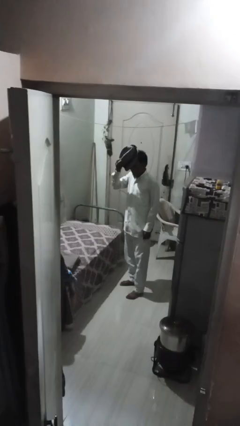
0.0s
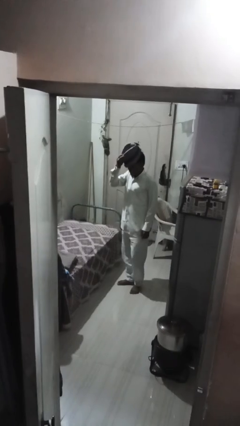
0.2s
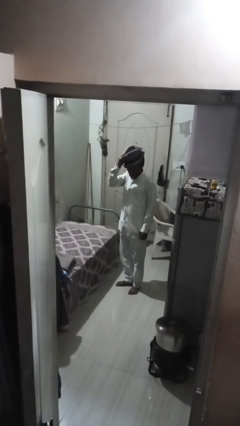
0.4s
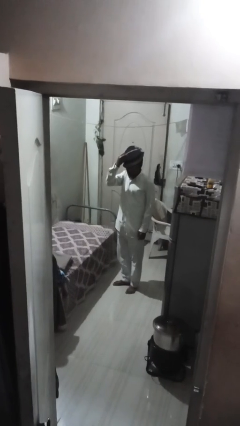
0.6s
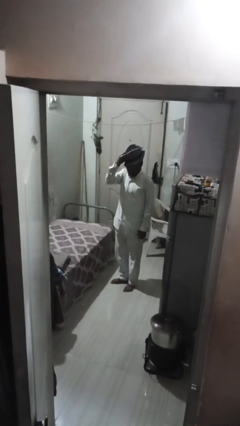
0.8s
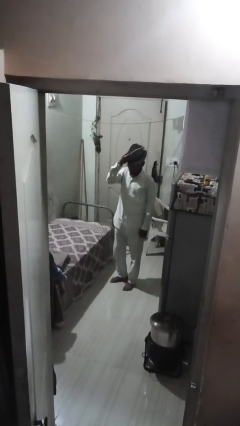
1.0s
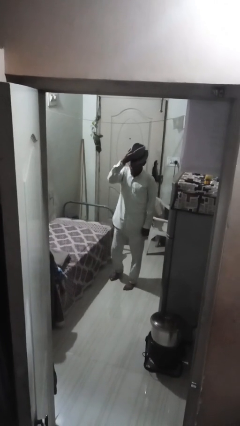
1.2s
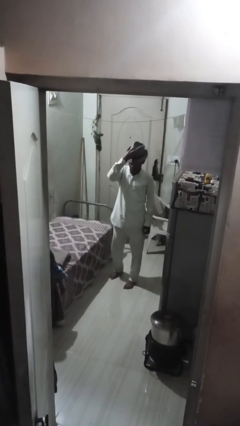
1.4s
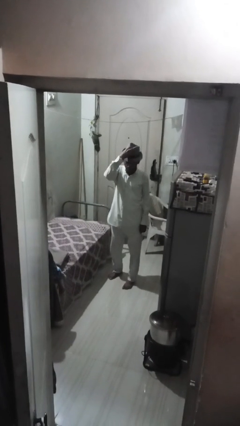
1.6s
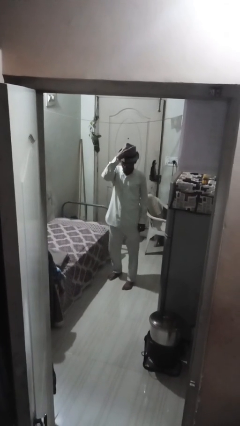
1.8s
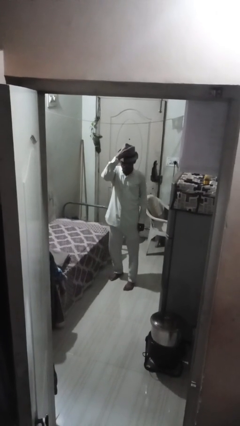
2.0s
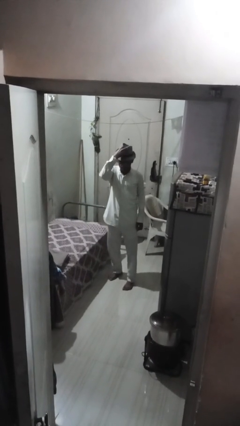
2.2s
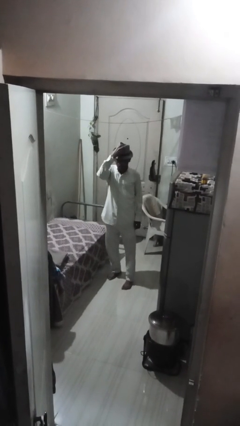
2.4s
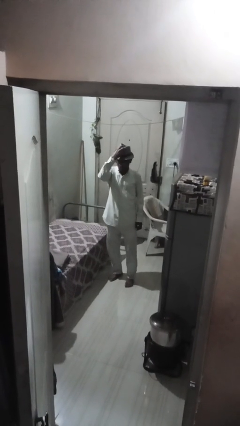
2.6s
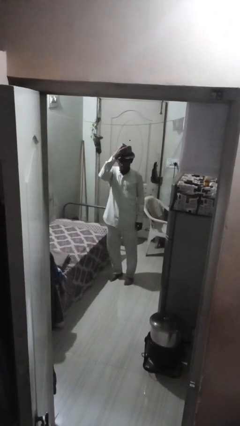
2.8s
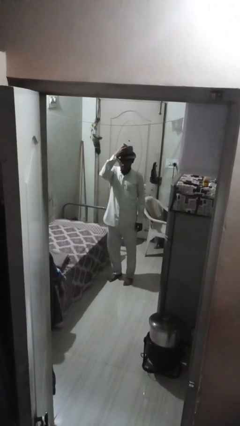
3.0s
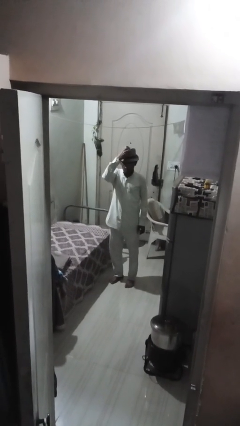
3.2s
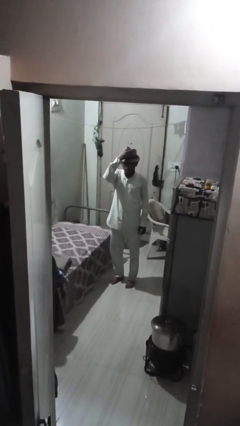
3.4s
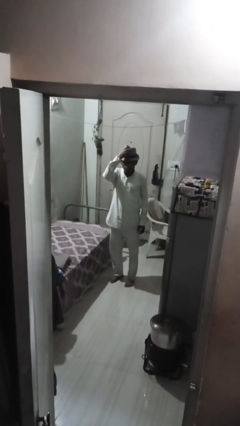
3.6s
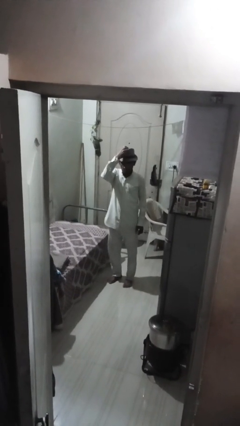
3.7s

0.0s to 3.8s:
person puts on hat

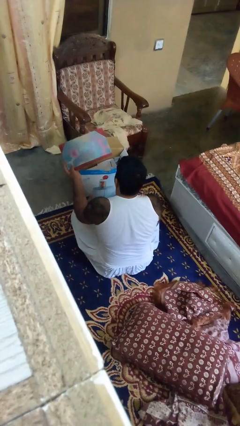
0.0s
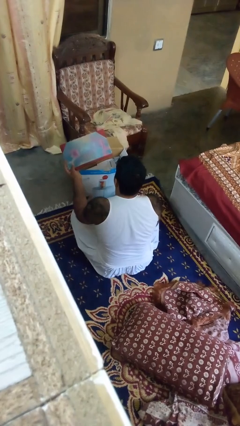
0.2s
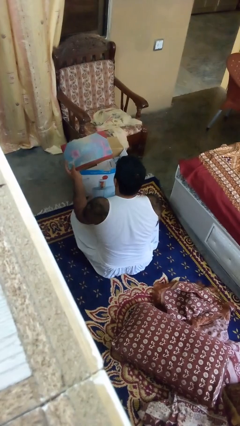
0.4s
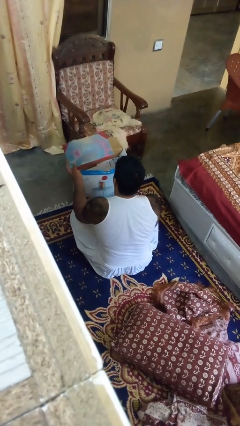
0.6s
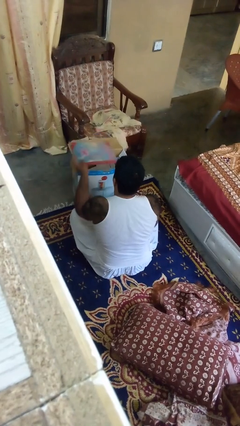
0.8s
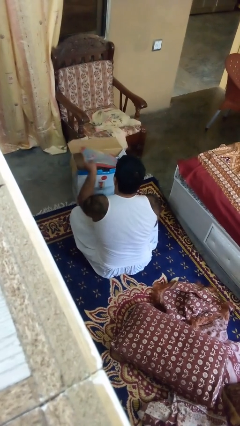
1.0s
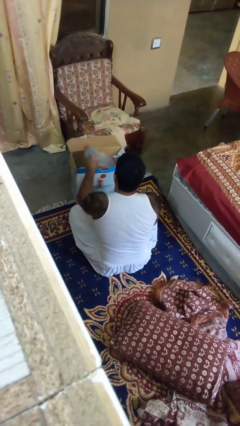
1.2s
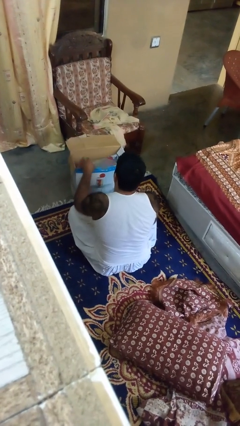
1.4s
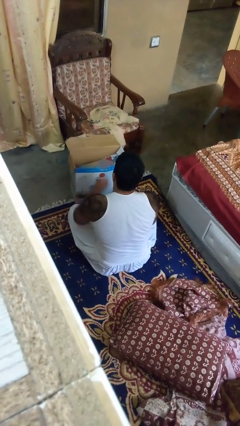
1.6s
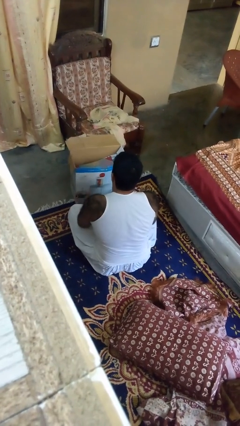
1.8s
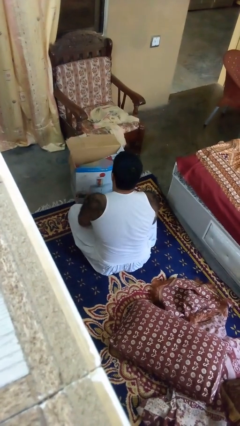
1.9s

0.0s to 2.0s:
person puts object into box

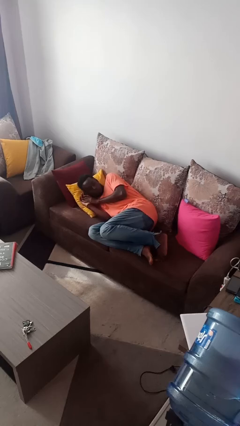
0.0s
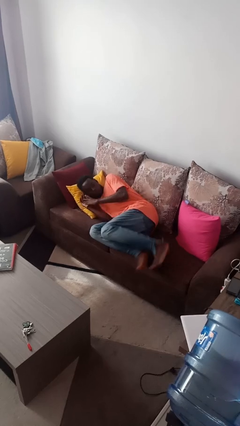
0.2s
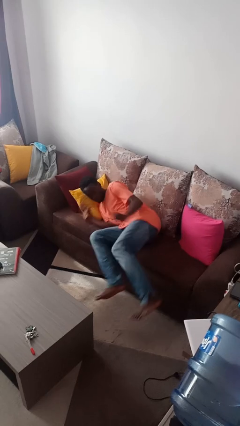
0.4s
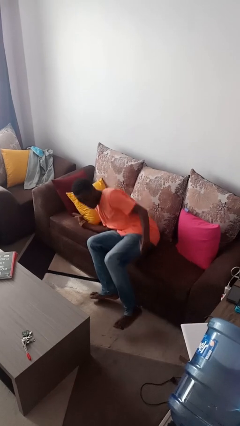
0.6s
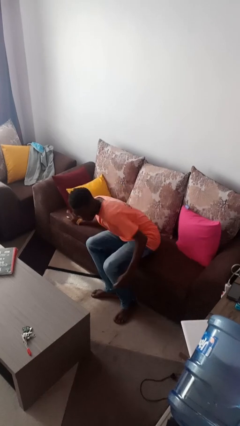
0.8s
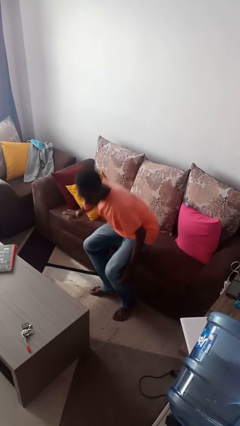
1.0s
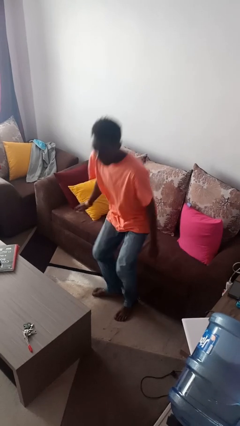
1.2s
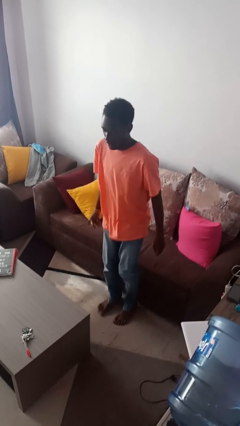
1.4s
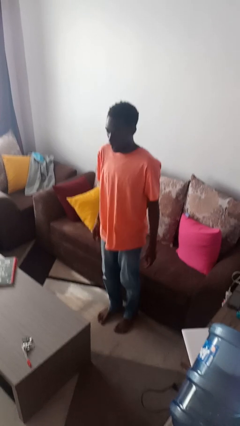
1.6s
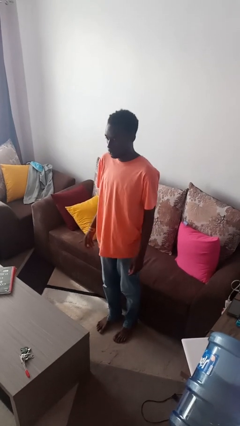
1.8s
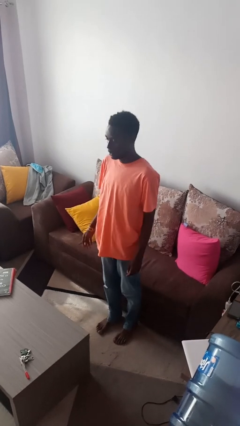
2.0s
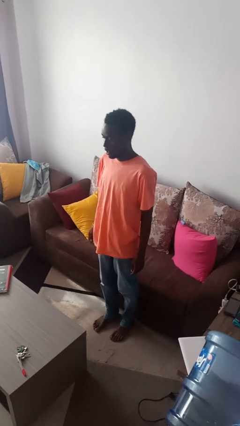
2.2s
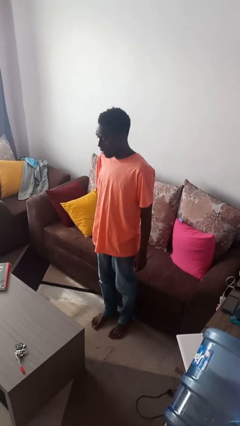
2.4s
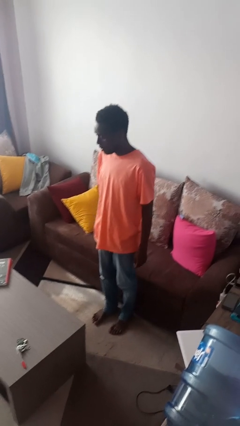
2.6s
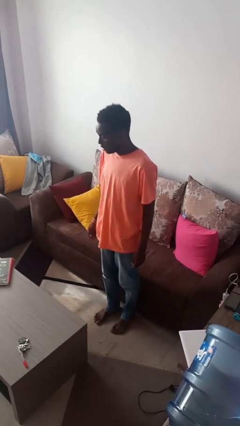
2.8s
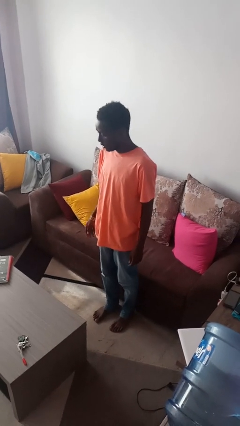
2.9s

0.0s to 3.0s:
person stands up

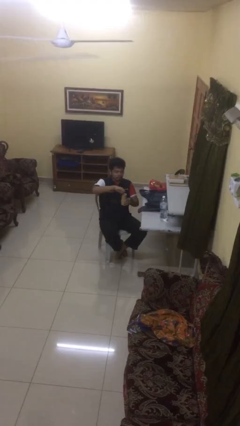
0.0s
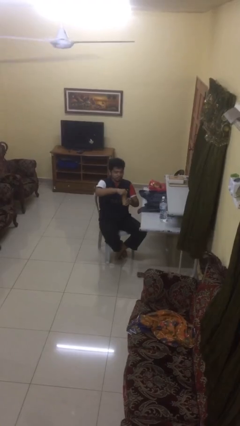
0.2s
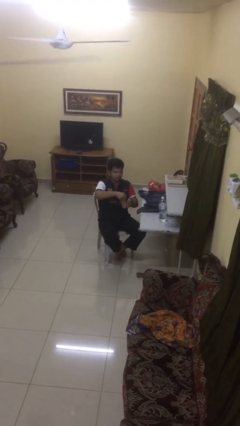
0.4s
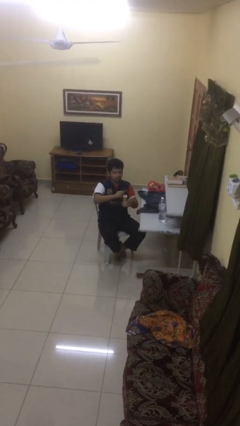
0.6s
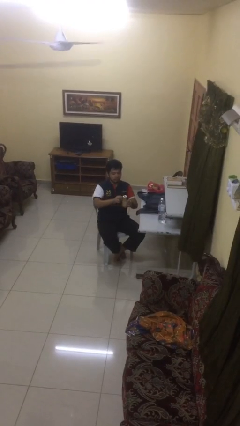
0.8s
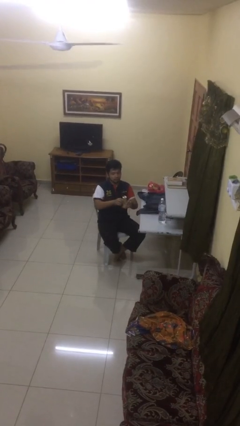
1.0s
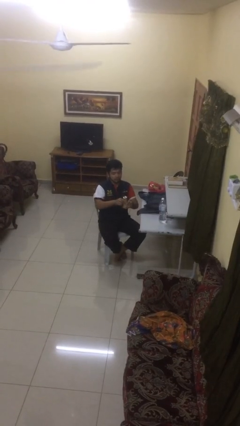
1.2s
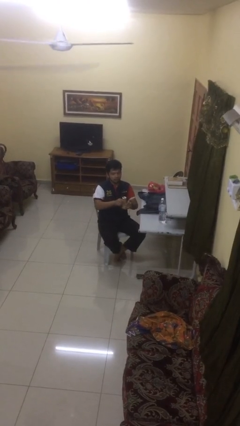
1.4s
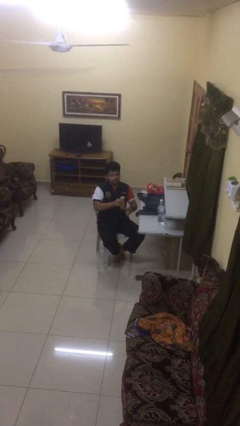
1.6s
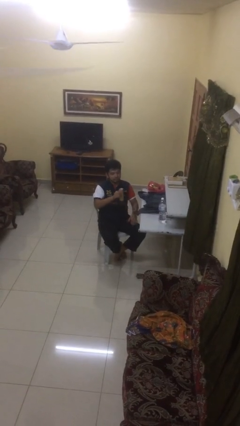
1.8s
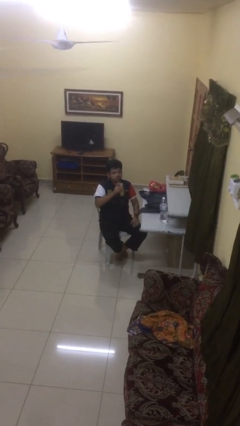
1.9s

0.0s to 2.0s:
person opens beverage can

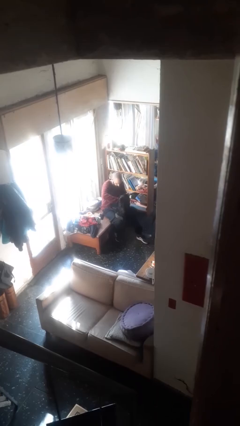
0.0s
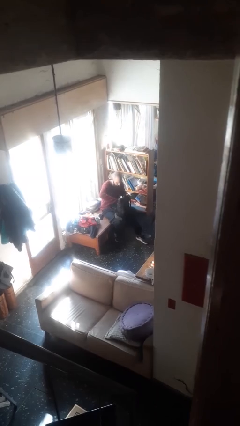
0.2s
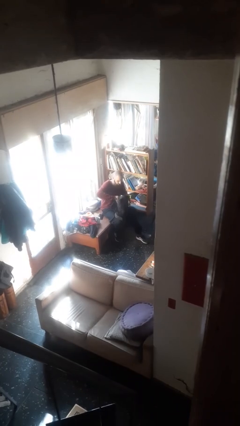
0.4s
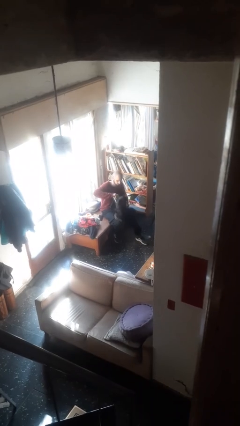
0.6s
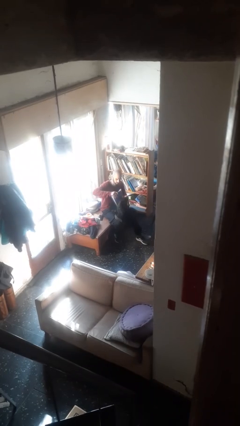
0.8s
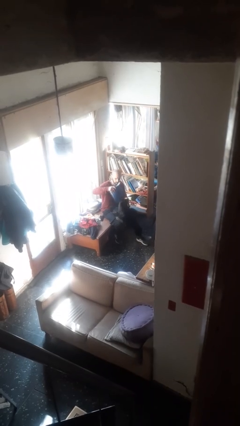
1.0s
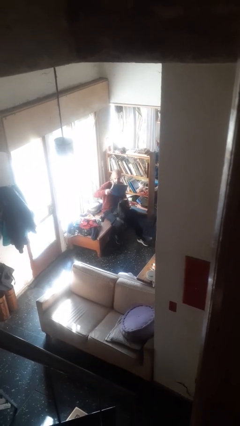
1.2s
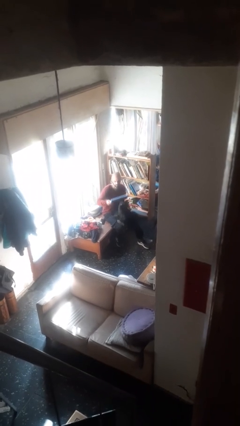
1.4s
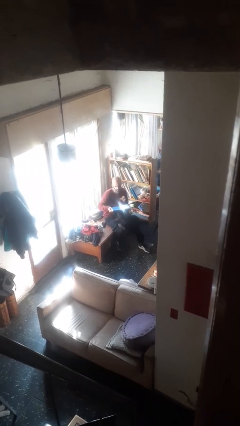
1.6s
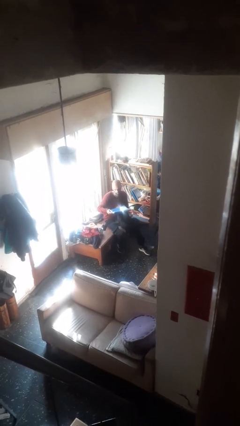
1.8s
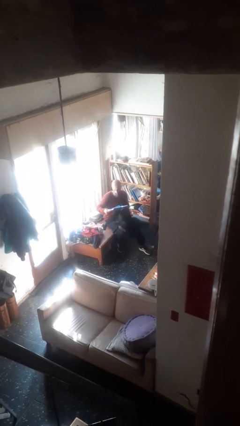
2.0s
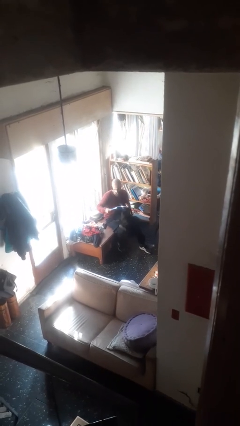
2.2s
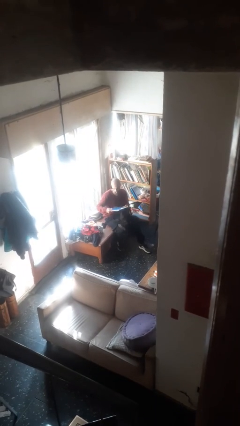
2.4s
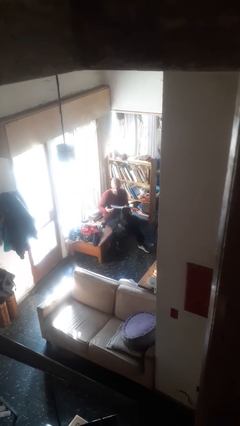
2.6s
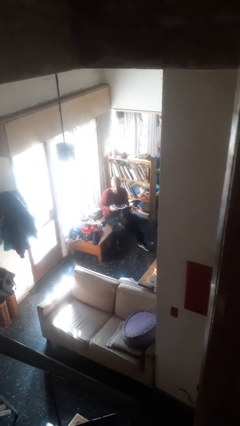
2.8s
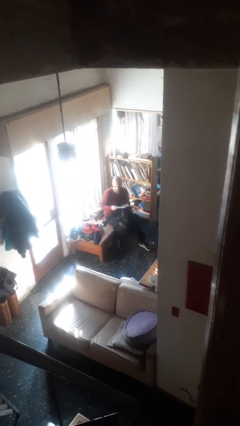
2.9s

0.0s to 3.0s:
person takes object from backpack

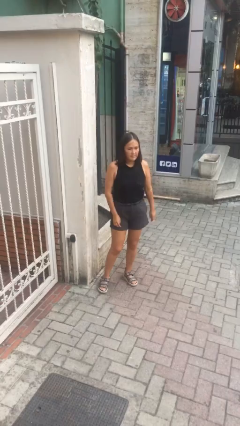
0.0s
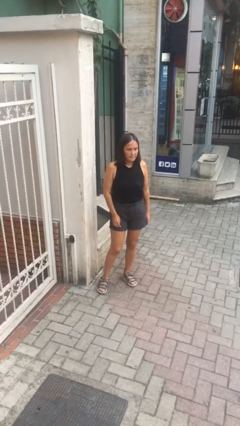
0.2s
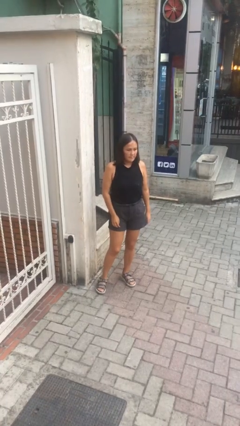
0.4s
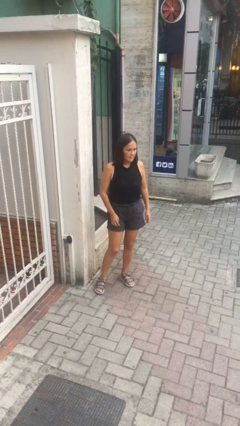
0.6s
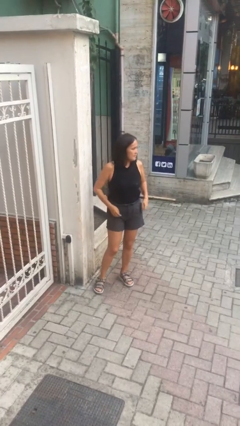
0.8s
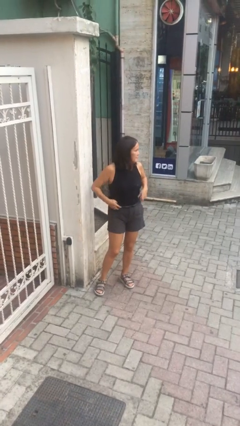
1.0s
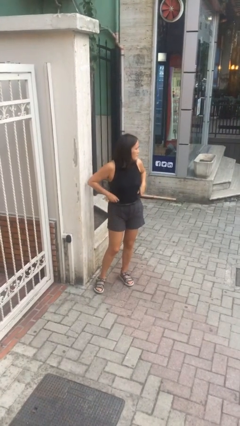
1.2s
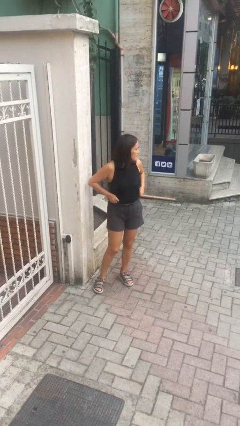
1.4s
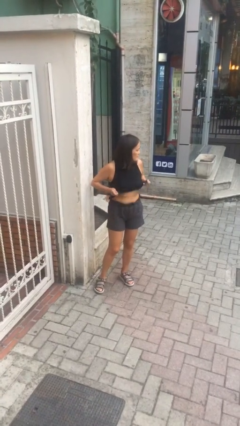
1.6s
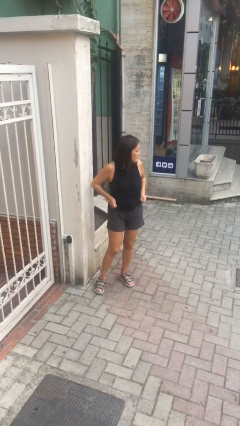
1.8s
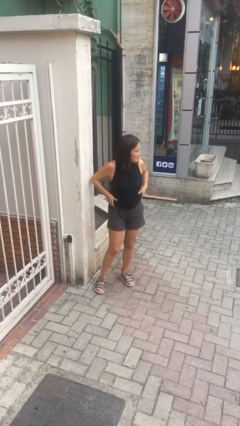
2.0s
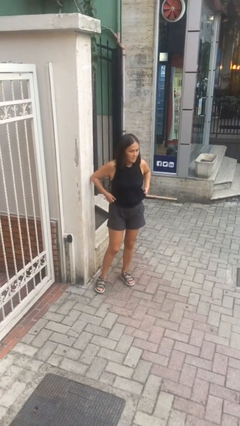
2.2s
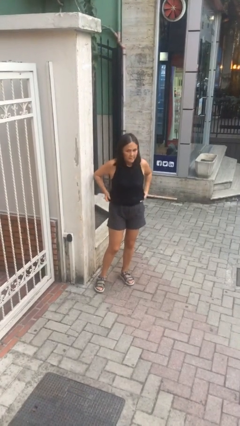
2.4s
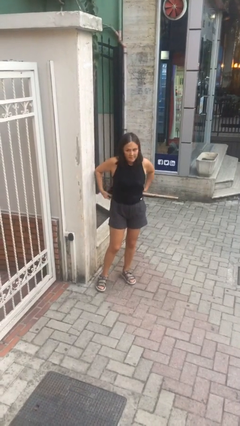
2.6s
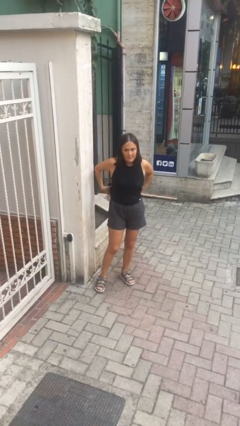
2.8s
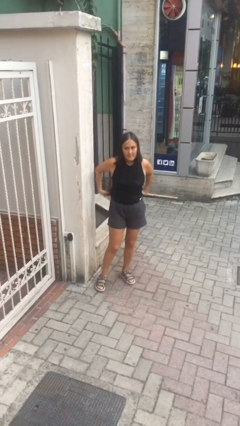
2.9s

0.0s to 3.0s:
person untucks shirt
